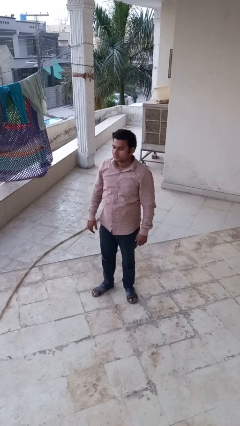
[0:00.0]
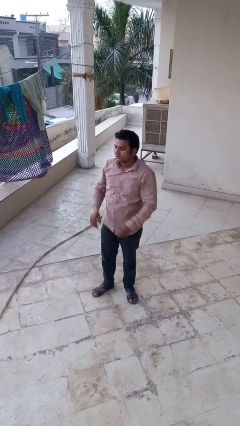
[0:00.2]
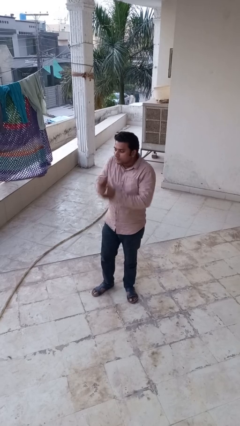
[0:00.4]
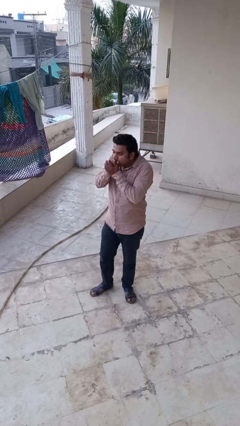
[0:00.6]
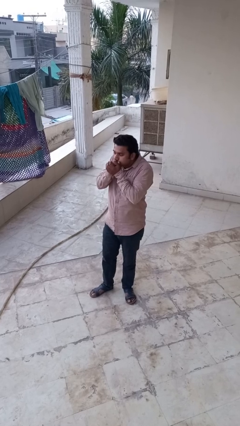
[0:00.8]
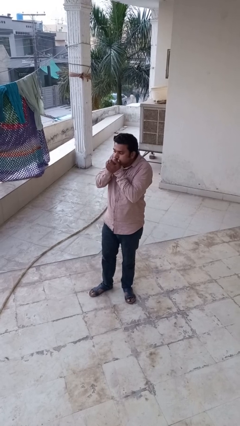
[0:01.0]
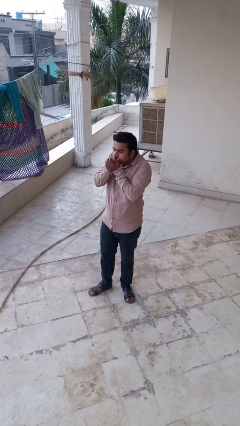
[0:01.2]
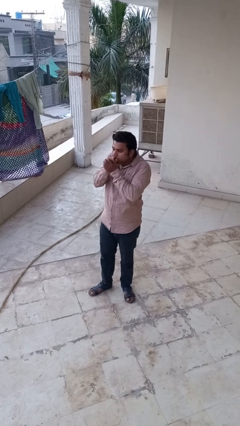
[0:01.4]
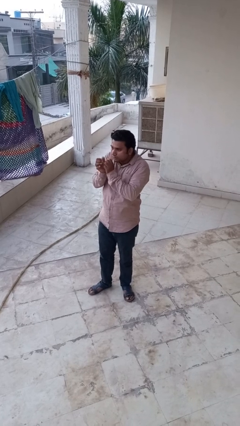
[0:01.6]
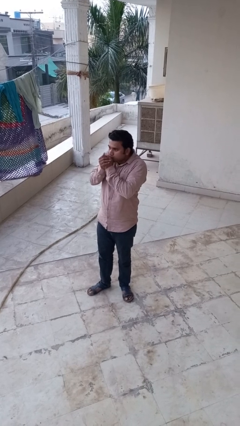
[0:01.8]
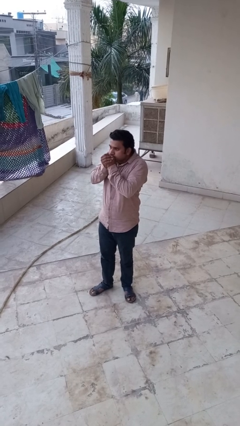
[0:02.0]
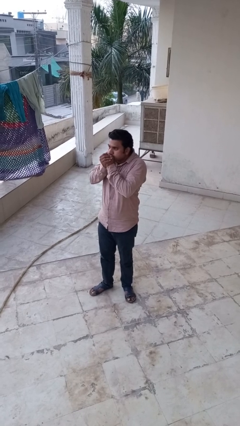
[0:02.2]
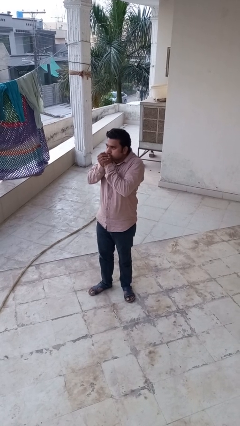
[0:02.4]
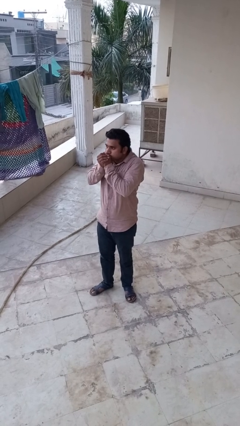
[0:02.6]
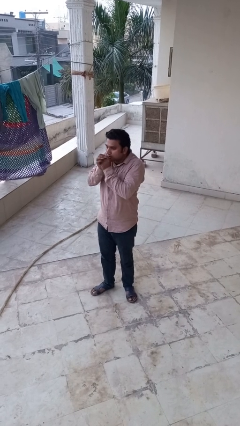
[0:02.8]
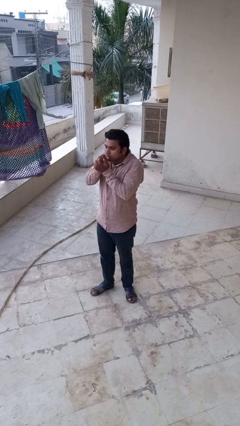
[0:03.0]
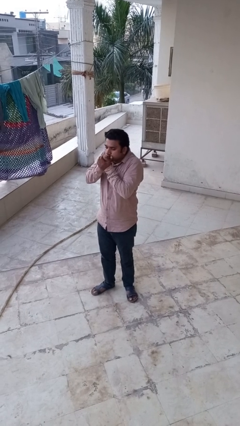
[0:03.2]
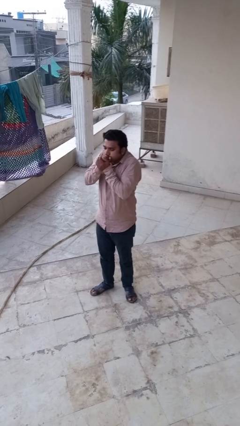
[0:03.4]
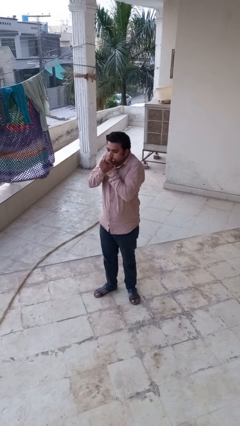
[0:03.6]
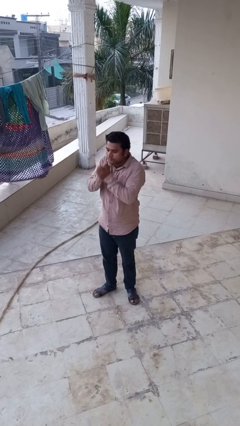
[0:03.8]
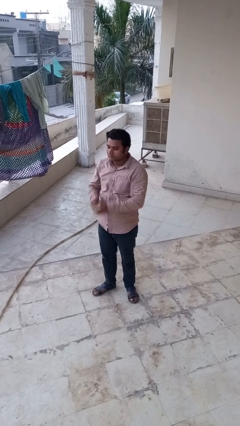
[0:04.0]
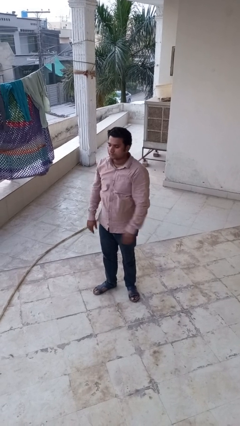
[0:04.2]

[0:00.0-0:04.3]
person blows into hands

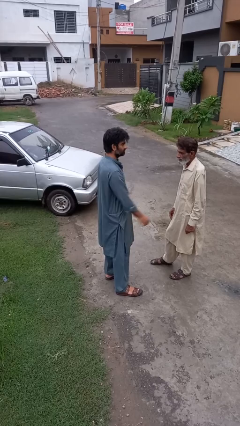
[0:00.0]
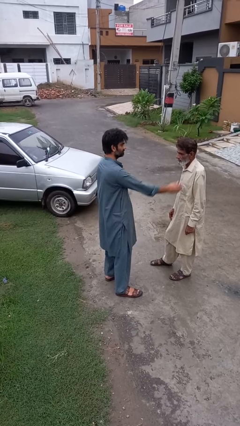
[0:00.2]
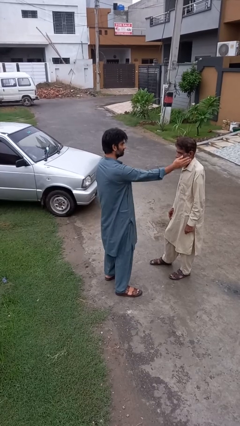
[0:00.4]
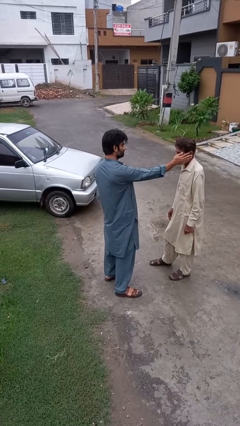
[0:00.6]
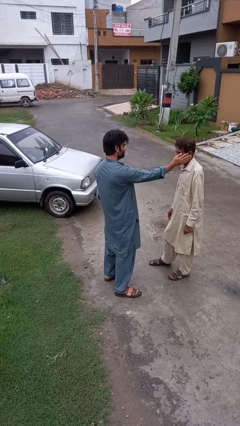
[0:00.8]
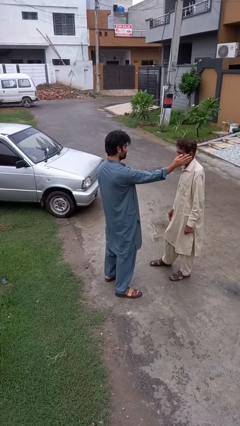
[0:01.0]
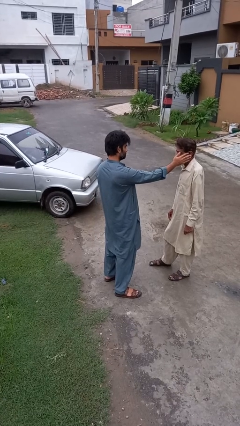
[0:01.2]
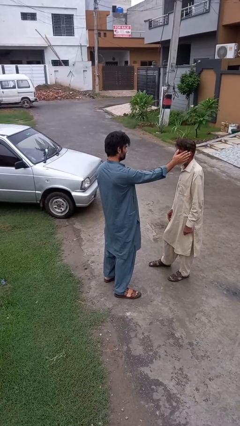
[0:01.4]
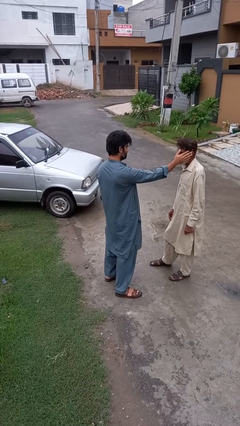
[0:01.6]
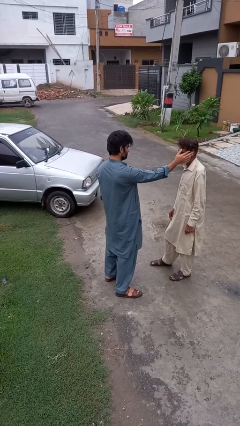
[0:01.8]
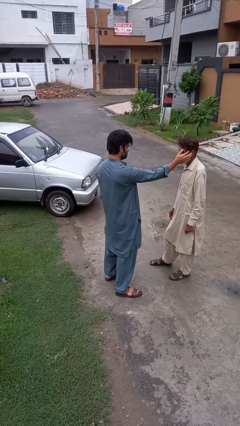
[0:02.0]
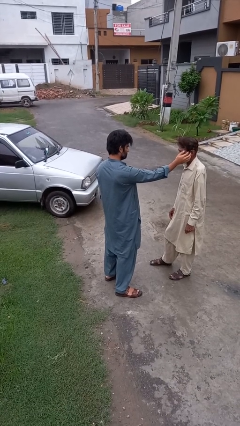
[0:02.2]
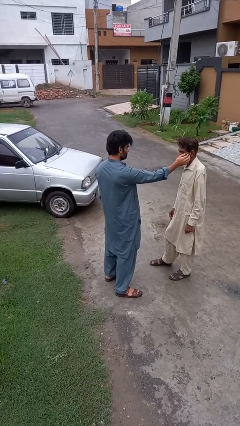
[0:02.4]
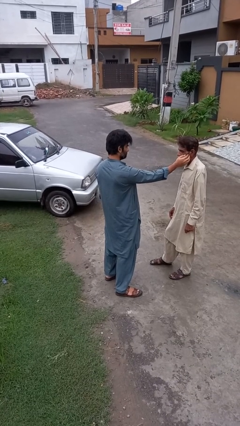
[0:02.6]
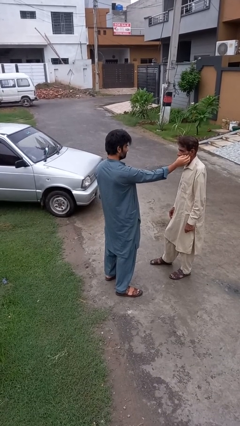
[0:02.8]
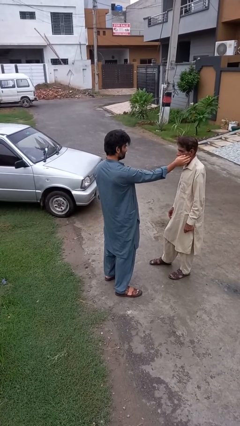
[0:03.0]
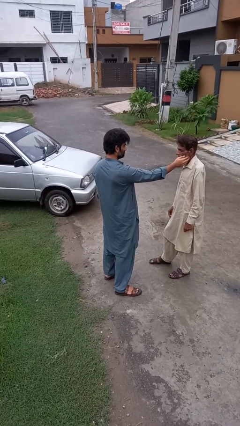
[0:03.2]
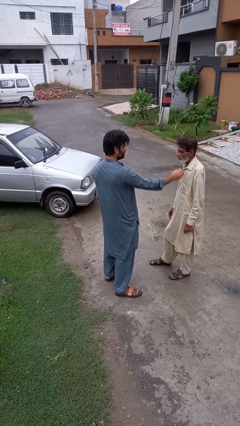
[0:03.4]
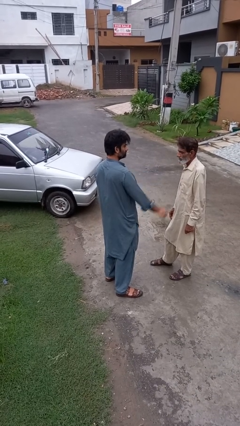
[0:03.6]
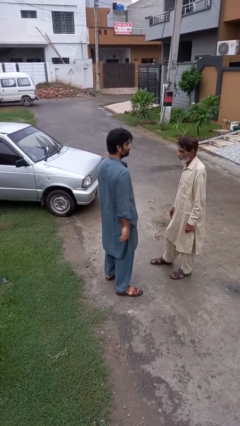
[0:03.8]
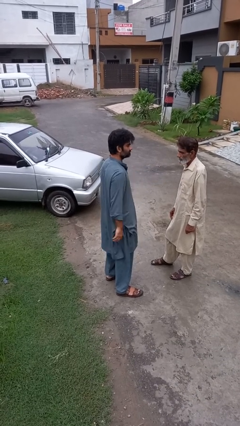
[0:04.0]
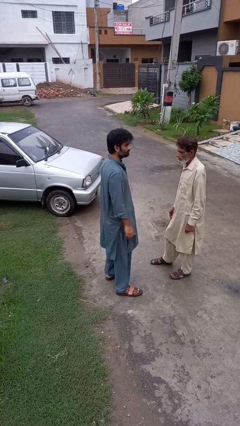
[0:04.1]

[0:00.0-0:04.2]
person touches face of person

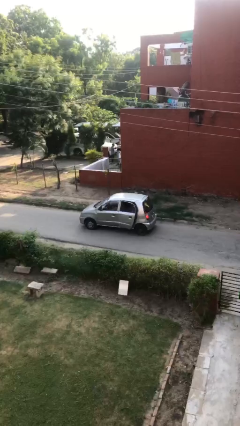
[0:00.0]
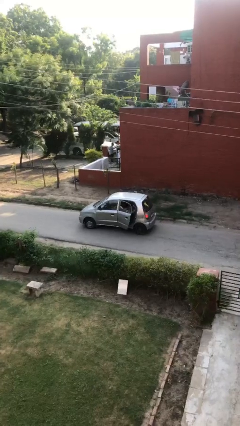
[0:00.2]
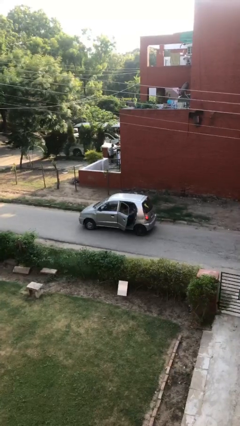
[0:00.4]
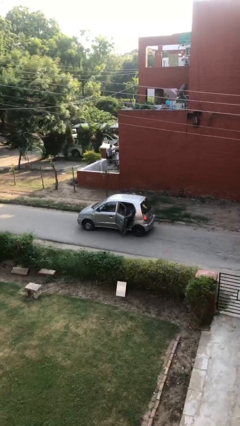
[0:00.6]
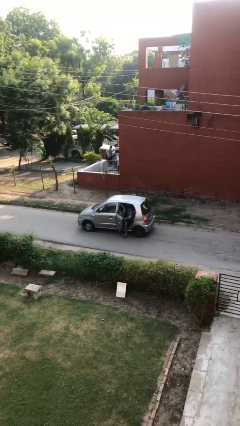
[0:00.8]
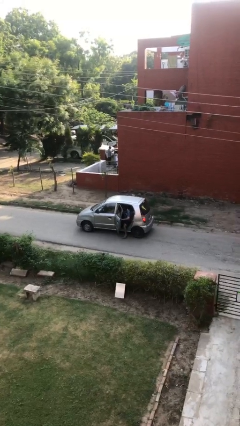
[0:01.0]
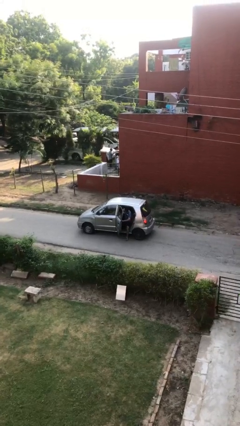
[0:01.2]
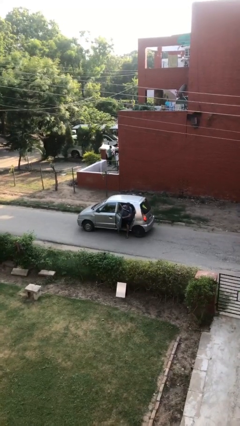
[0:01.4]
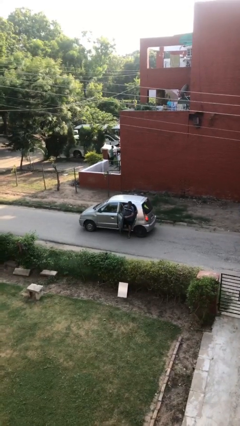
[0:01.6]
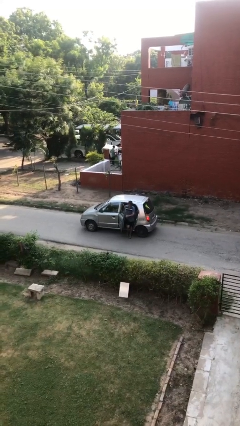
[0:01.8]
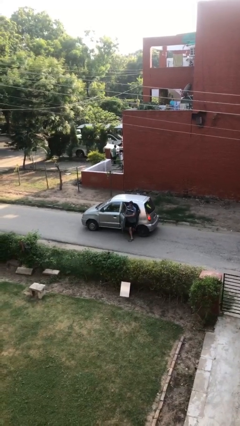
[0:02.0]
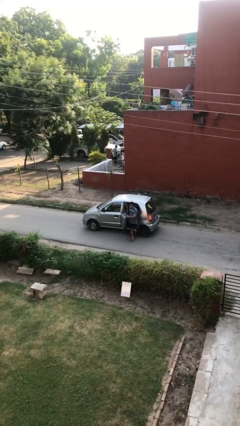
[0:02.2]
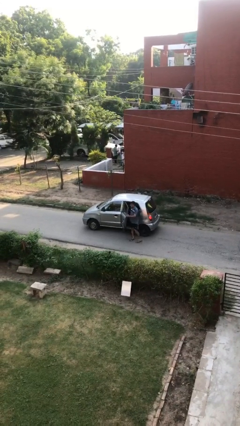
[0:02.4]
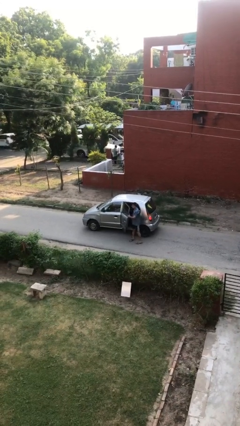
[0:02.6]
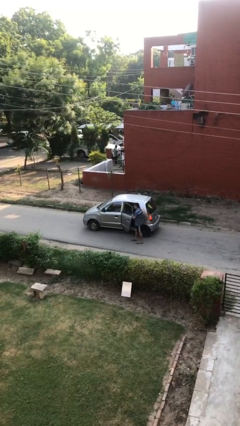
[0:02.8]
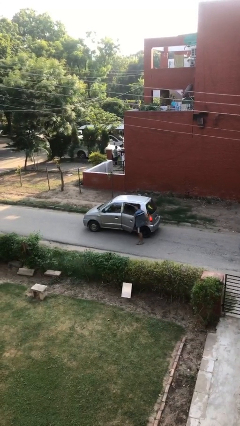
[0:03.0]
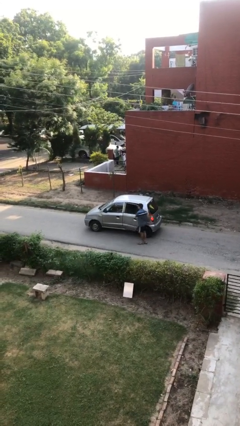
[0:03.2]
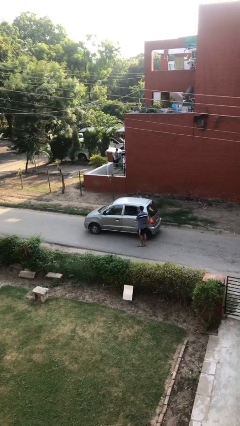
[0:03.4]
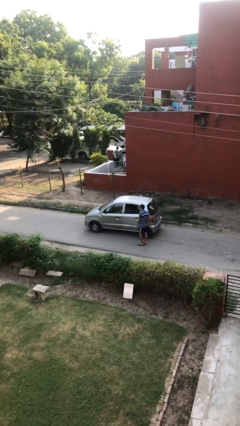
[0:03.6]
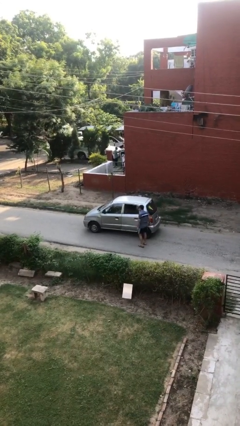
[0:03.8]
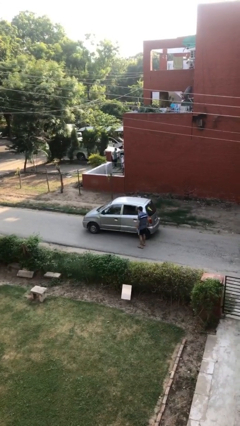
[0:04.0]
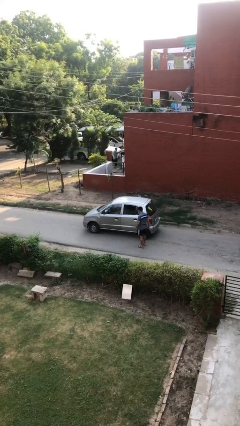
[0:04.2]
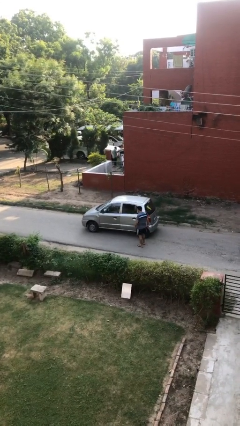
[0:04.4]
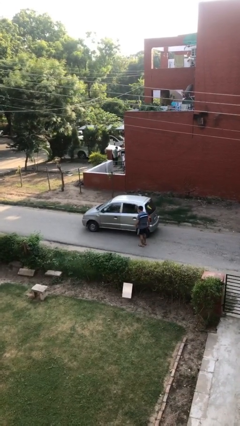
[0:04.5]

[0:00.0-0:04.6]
car drops off person

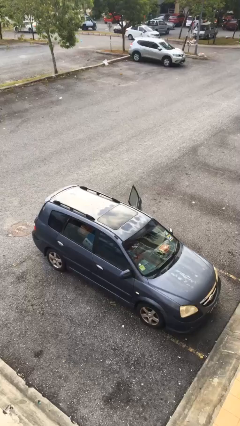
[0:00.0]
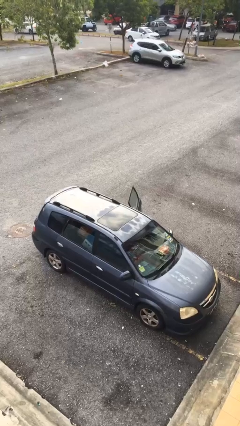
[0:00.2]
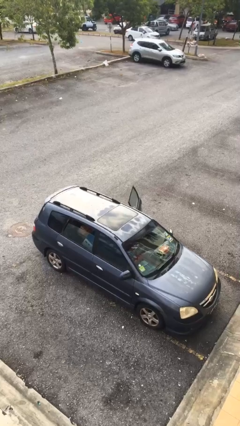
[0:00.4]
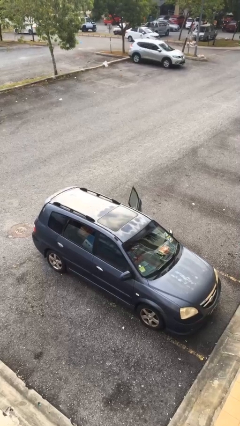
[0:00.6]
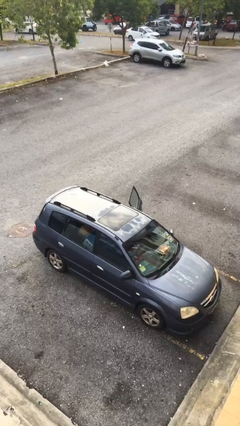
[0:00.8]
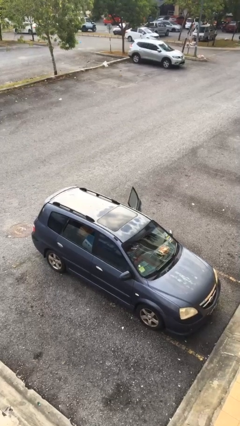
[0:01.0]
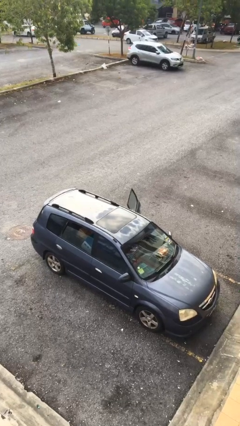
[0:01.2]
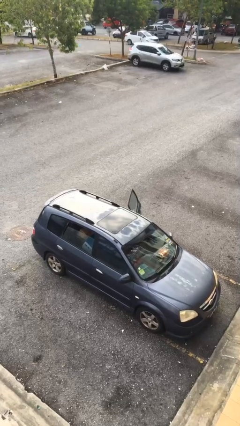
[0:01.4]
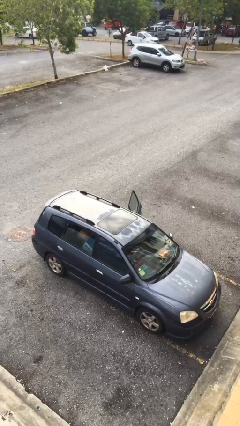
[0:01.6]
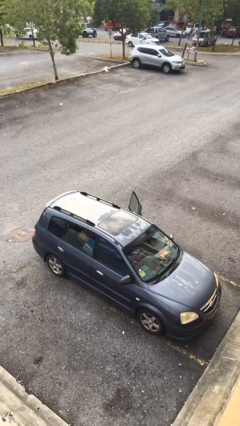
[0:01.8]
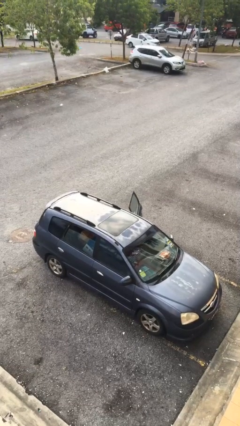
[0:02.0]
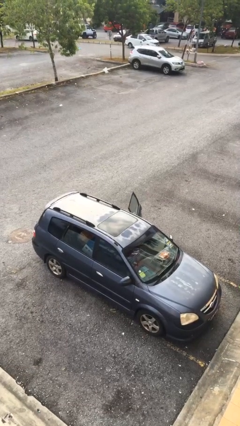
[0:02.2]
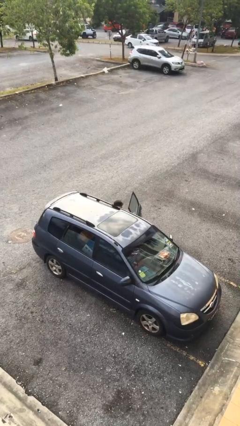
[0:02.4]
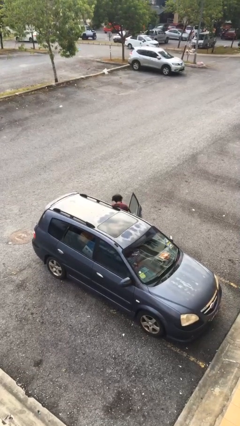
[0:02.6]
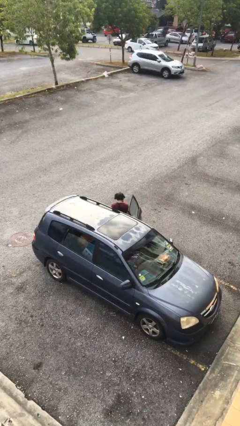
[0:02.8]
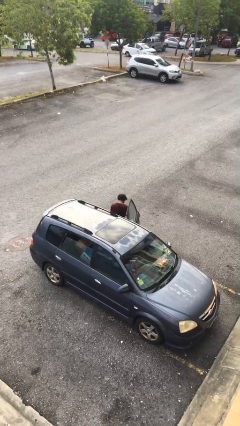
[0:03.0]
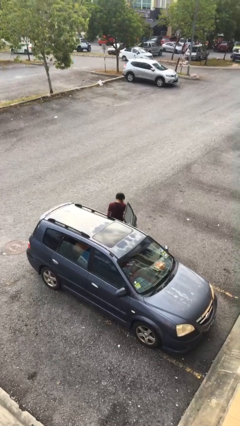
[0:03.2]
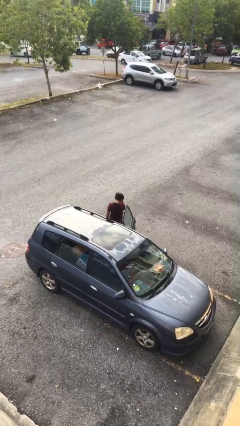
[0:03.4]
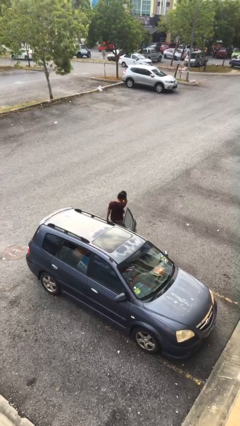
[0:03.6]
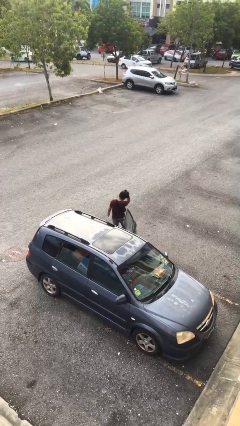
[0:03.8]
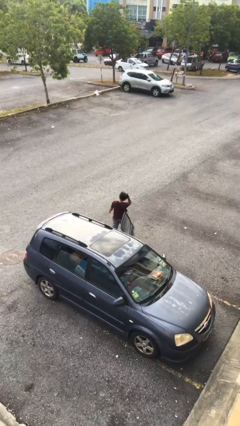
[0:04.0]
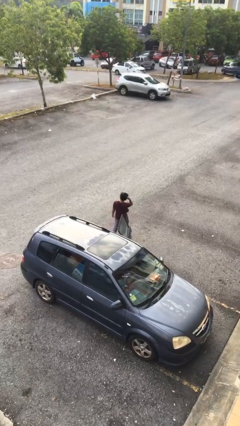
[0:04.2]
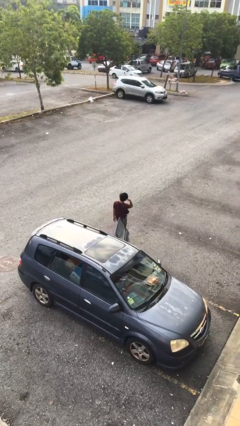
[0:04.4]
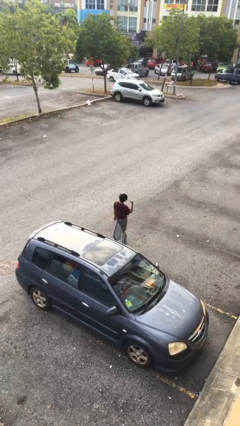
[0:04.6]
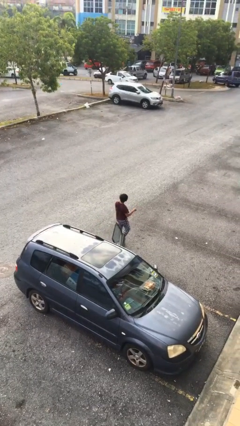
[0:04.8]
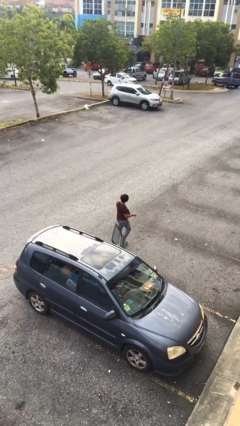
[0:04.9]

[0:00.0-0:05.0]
person exits car
